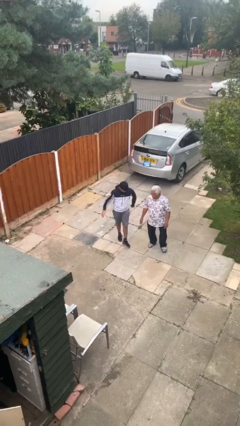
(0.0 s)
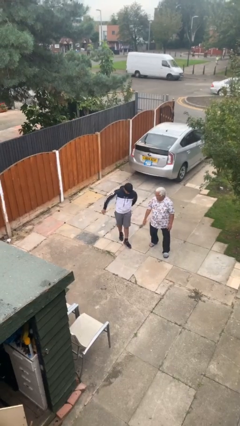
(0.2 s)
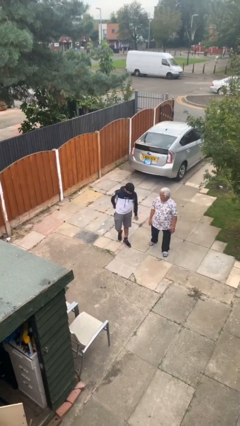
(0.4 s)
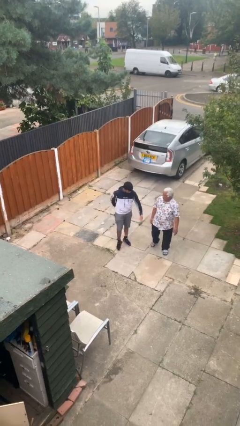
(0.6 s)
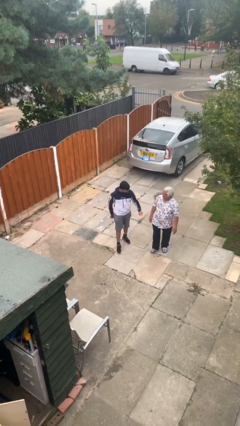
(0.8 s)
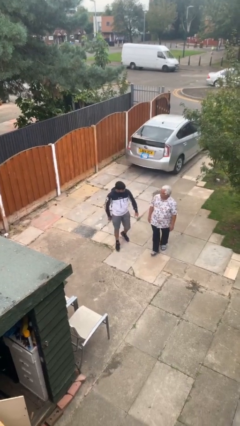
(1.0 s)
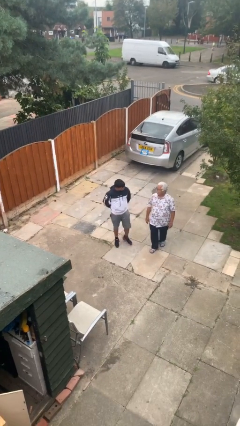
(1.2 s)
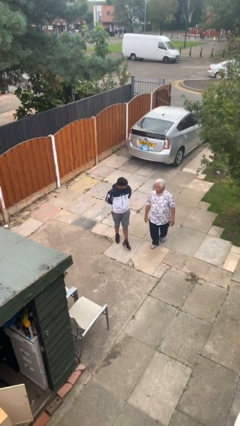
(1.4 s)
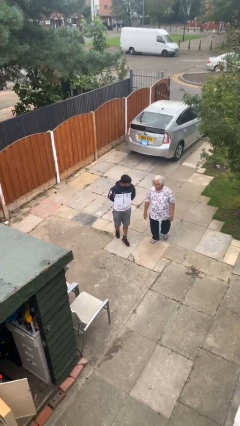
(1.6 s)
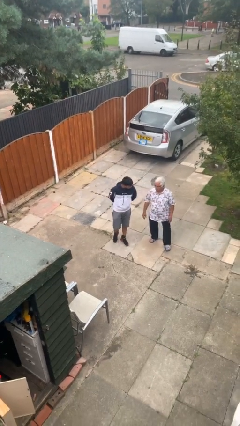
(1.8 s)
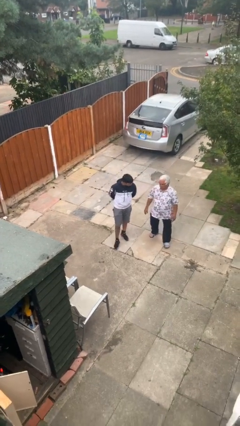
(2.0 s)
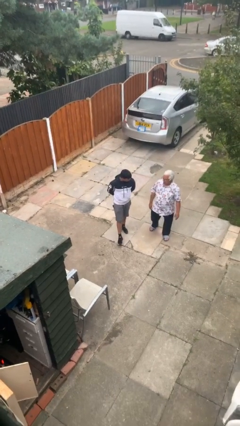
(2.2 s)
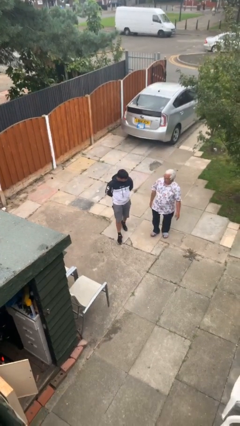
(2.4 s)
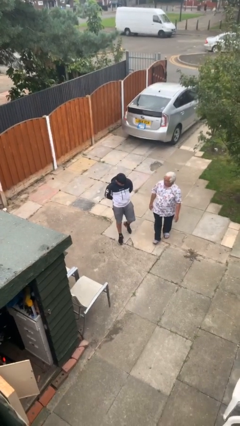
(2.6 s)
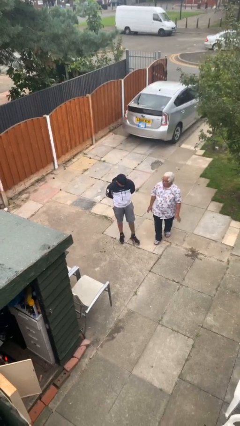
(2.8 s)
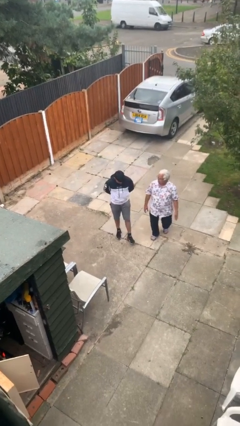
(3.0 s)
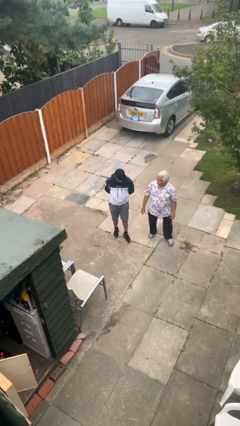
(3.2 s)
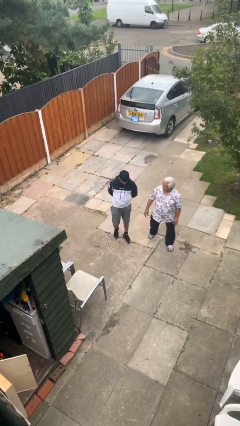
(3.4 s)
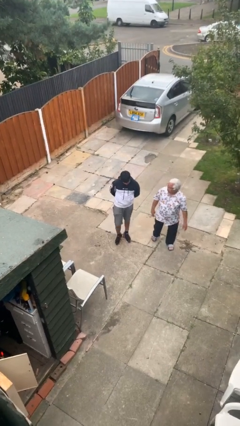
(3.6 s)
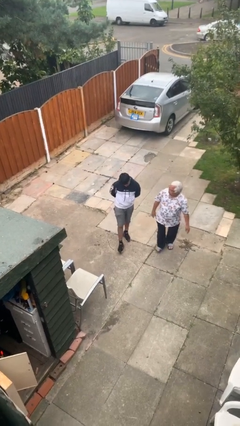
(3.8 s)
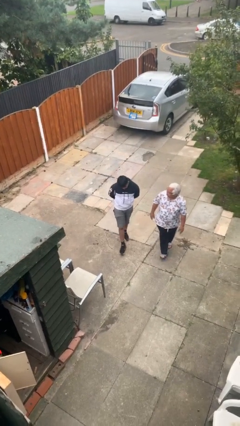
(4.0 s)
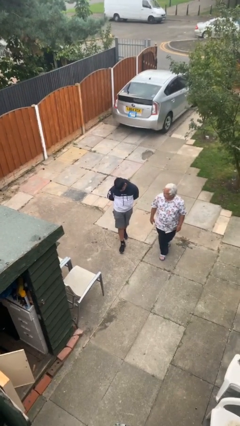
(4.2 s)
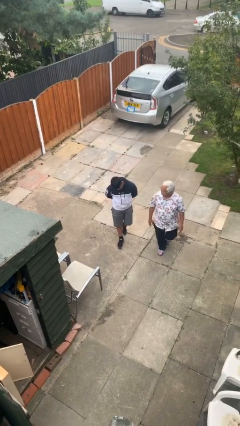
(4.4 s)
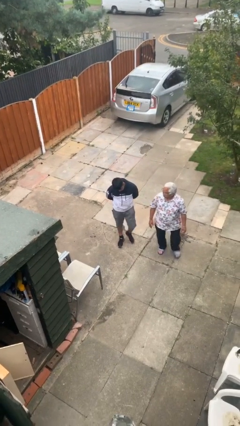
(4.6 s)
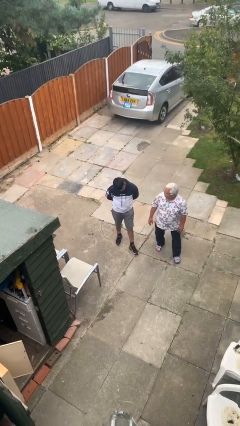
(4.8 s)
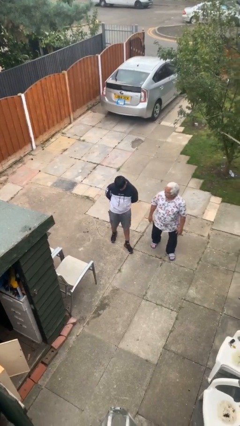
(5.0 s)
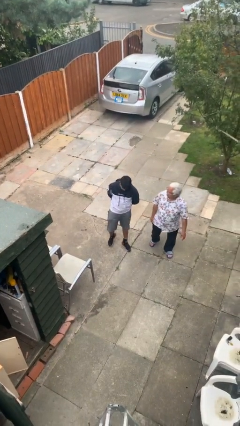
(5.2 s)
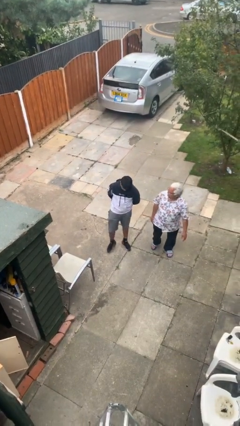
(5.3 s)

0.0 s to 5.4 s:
person talks to person

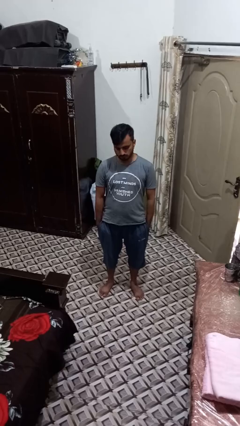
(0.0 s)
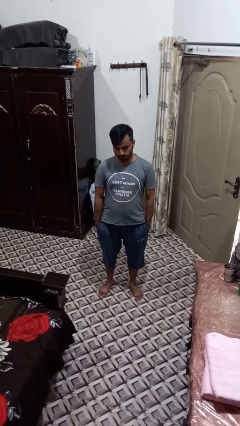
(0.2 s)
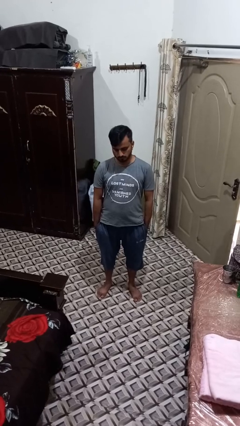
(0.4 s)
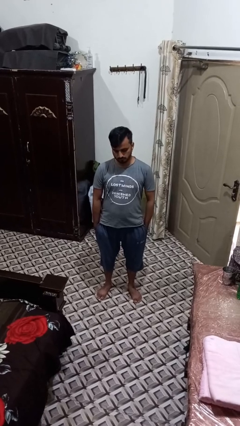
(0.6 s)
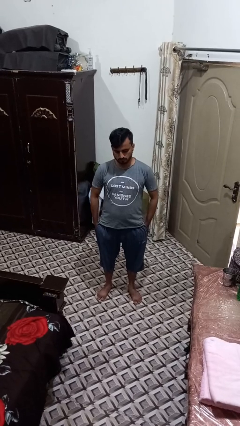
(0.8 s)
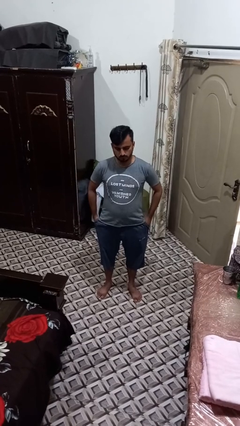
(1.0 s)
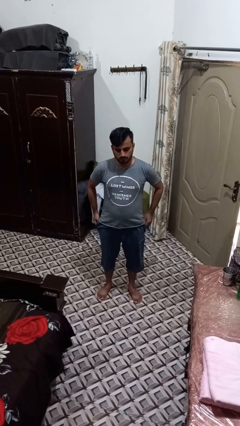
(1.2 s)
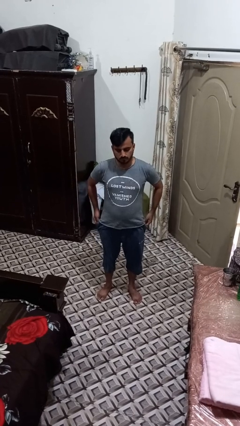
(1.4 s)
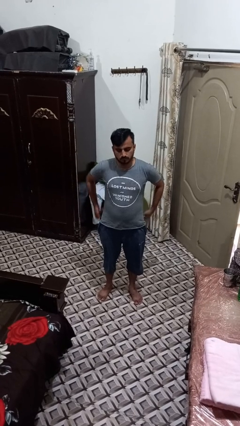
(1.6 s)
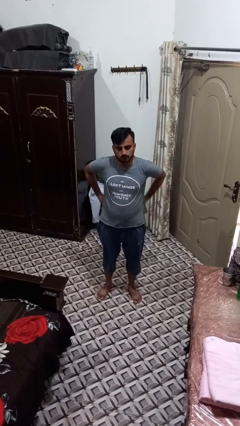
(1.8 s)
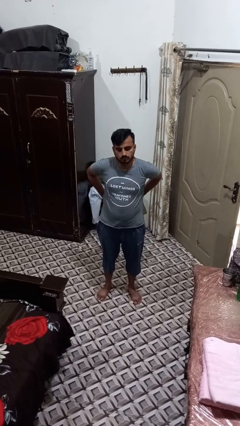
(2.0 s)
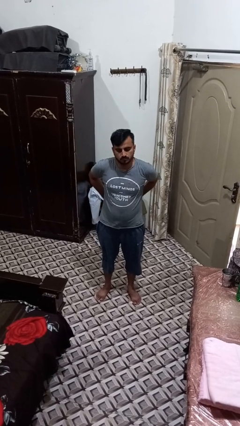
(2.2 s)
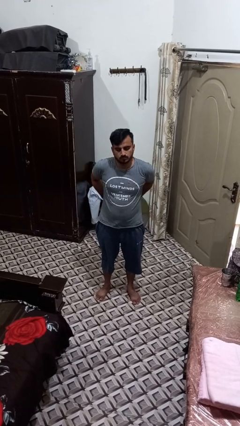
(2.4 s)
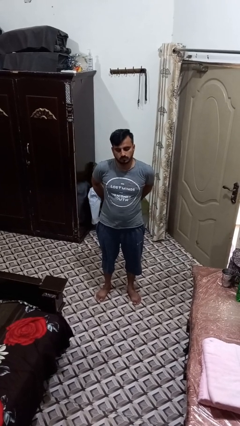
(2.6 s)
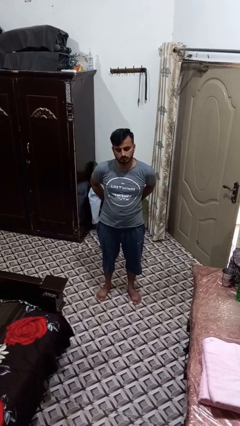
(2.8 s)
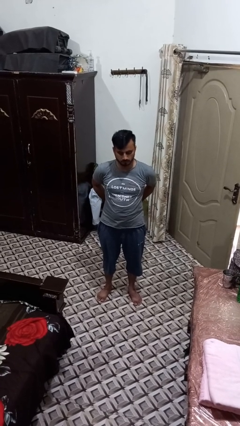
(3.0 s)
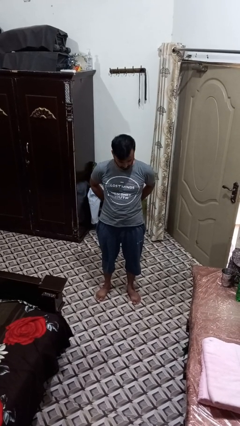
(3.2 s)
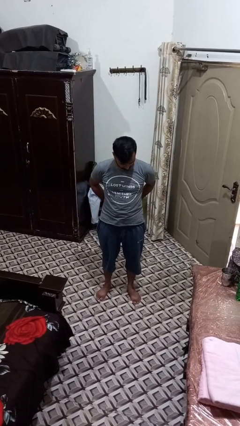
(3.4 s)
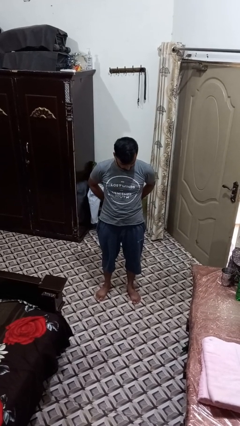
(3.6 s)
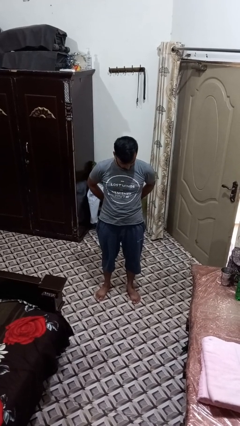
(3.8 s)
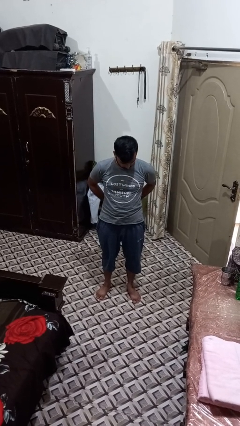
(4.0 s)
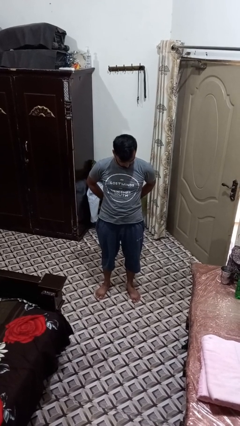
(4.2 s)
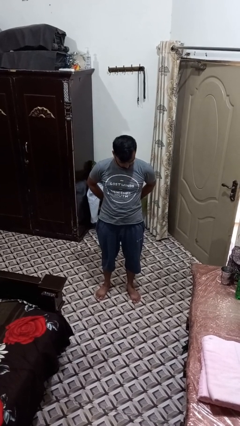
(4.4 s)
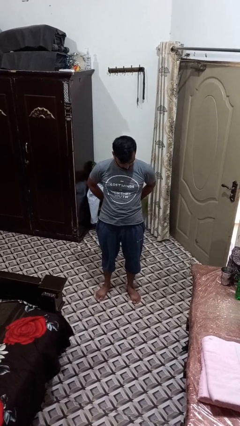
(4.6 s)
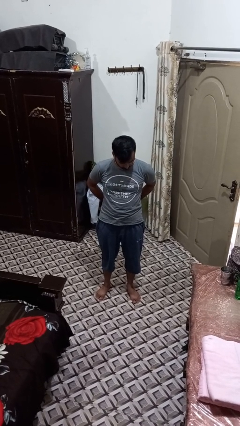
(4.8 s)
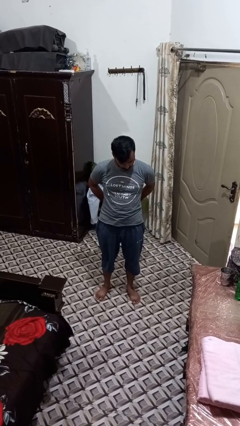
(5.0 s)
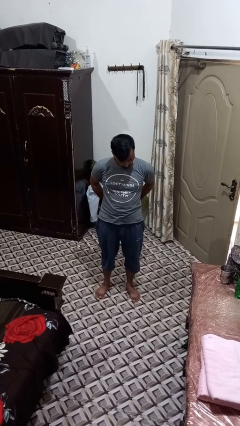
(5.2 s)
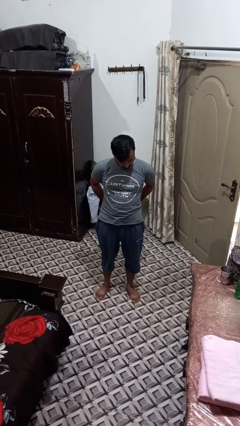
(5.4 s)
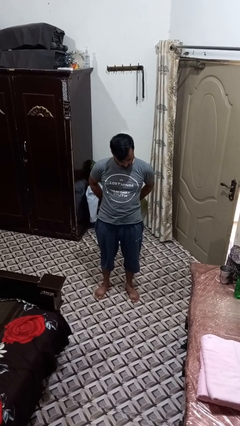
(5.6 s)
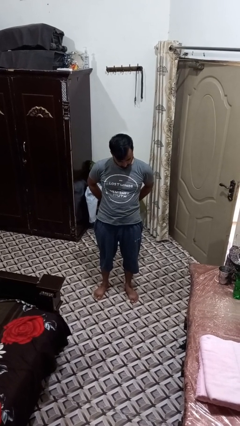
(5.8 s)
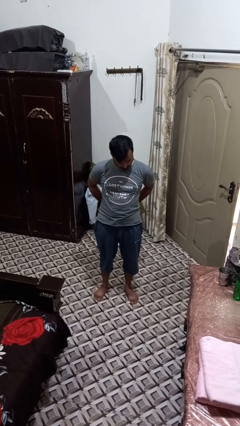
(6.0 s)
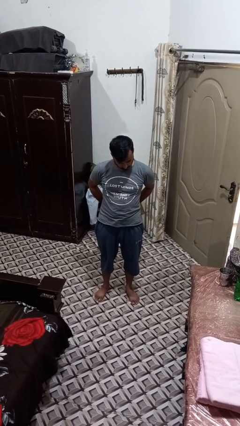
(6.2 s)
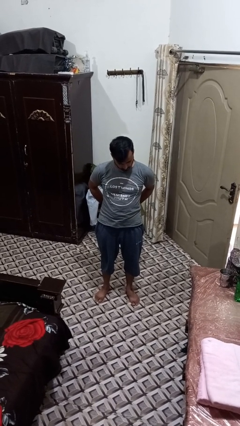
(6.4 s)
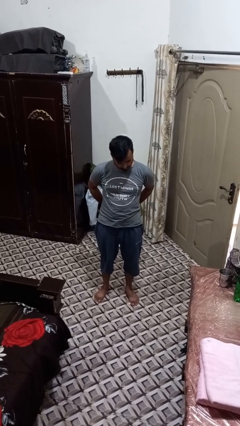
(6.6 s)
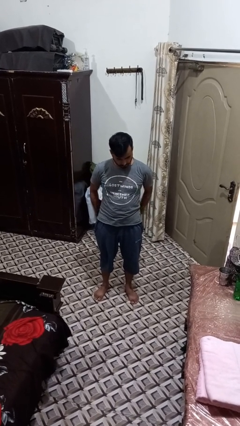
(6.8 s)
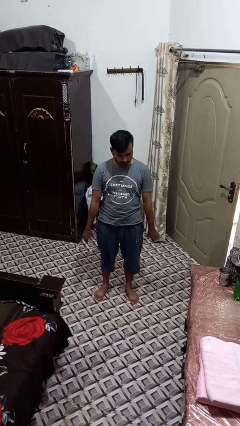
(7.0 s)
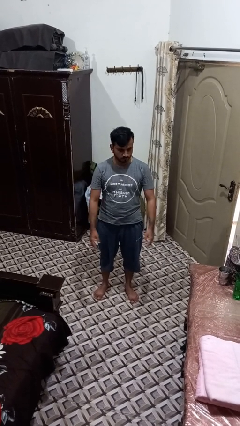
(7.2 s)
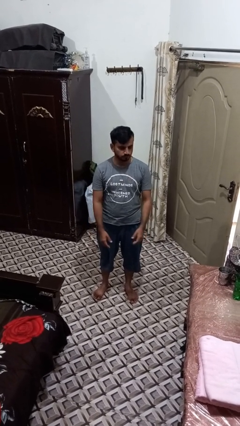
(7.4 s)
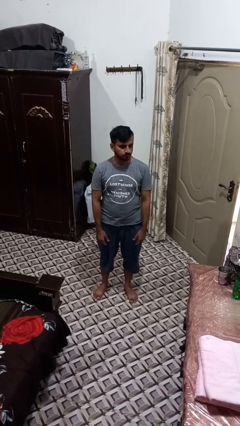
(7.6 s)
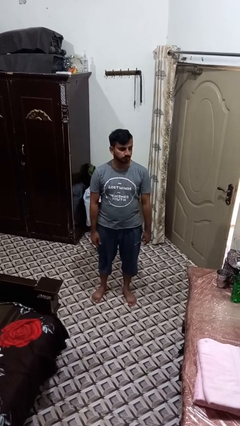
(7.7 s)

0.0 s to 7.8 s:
person puts hands in back pockets

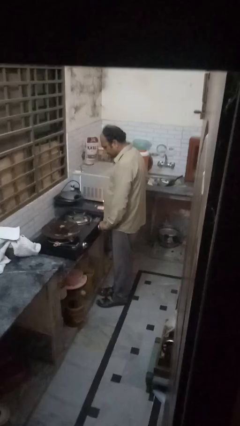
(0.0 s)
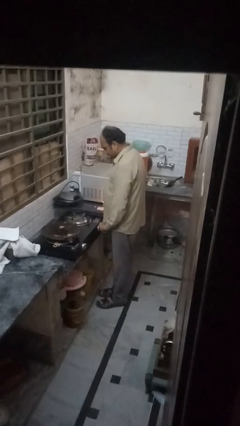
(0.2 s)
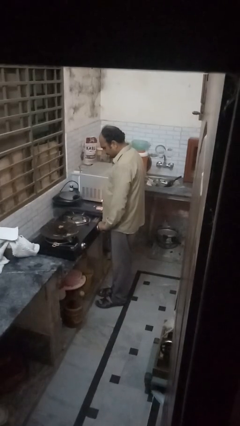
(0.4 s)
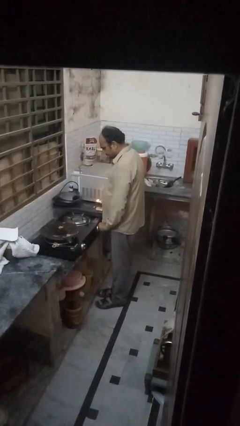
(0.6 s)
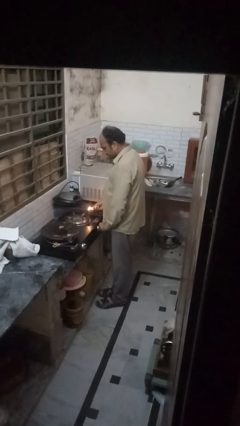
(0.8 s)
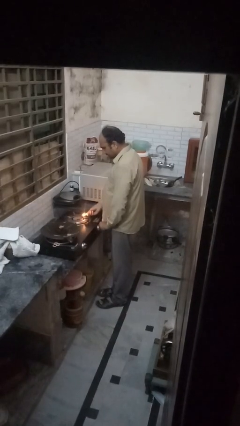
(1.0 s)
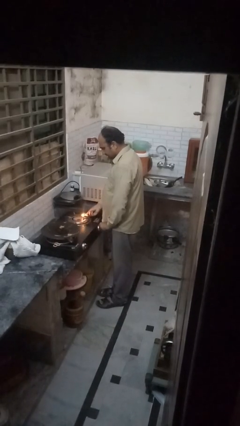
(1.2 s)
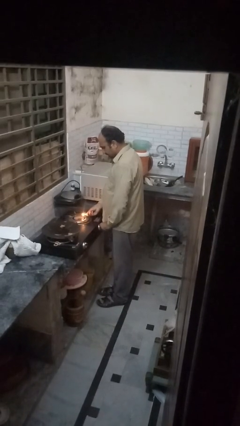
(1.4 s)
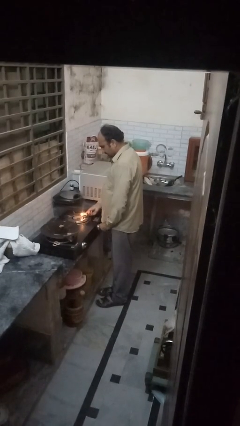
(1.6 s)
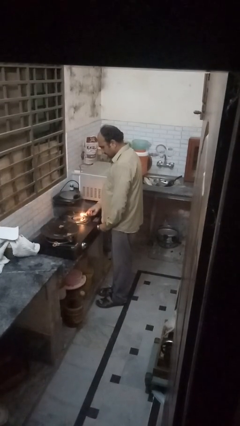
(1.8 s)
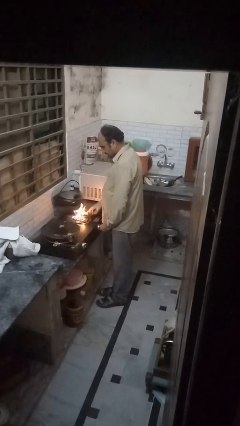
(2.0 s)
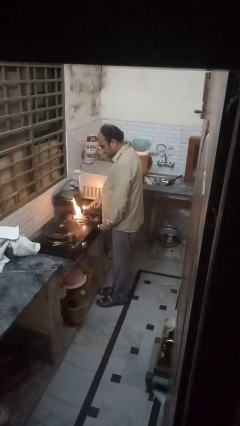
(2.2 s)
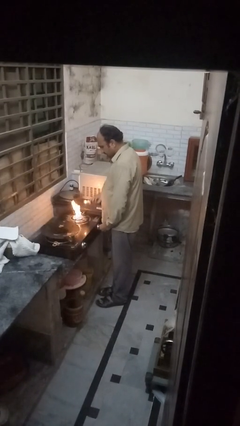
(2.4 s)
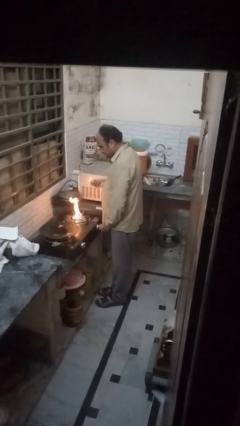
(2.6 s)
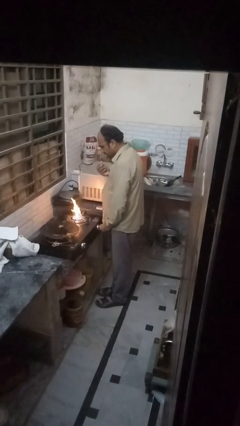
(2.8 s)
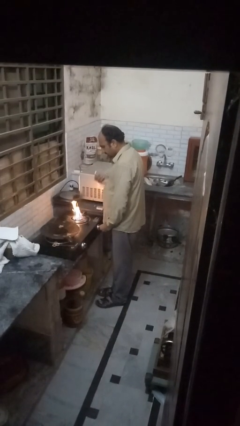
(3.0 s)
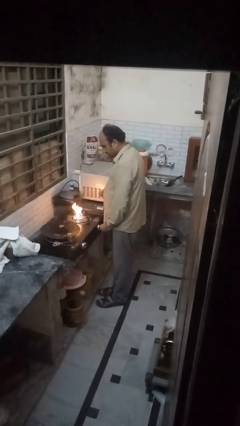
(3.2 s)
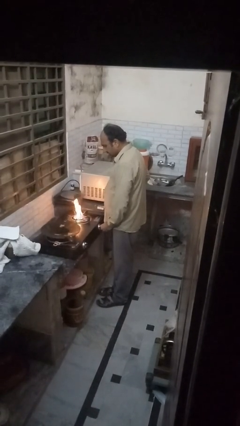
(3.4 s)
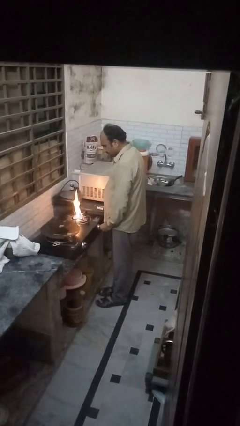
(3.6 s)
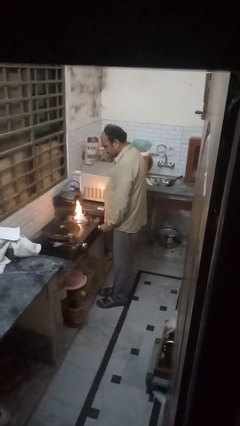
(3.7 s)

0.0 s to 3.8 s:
person turns on stovetop

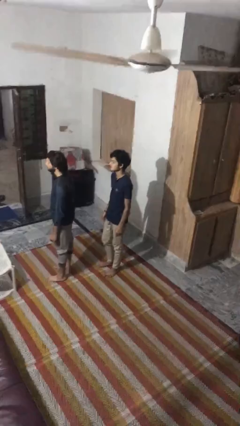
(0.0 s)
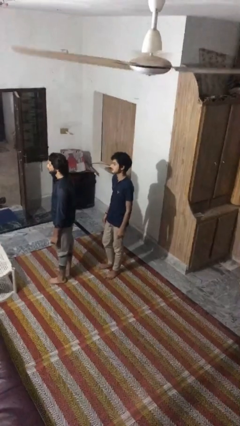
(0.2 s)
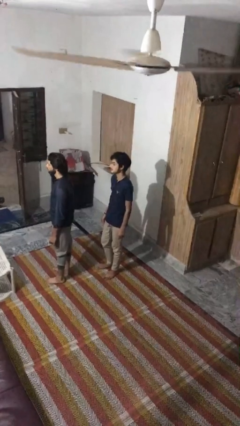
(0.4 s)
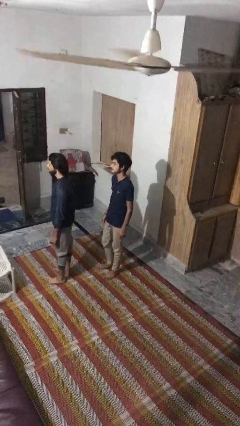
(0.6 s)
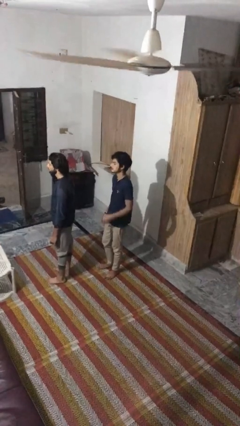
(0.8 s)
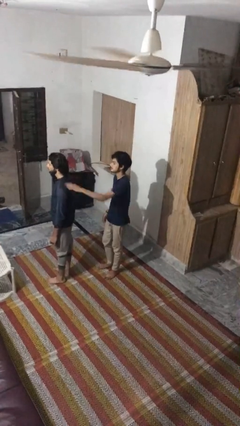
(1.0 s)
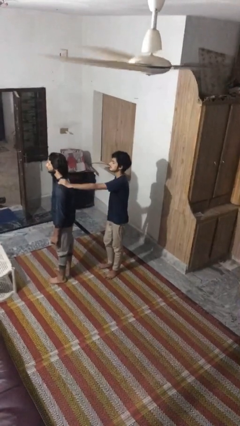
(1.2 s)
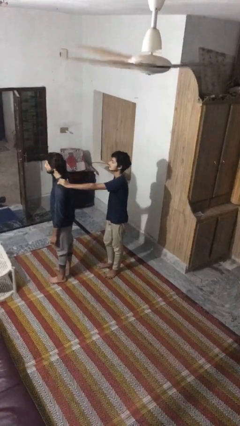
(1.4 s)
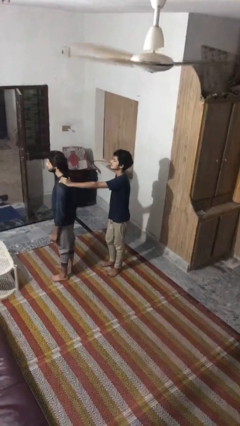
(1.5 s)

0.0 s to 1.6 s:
person grabs person by shoulder
